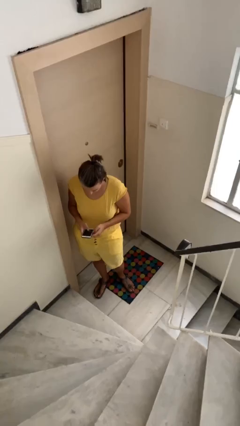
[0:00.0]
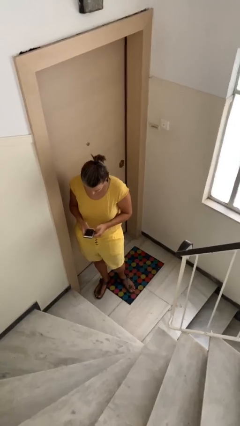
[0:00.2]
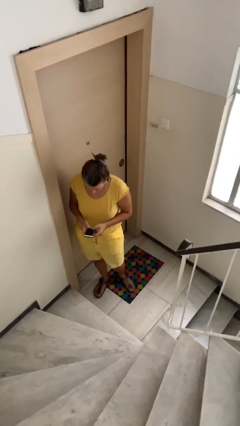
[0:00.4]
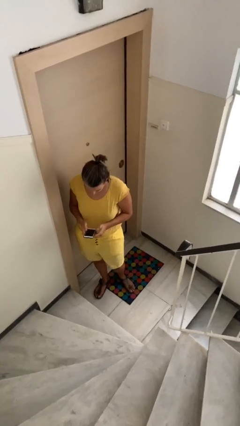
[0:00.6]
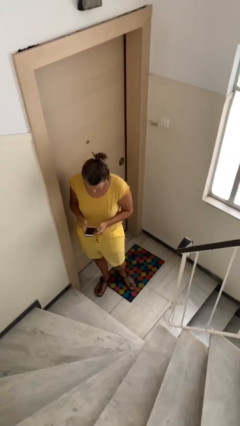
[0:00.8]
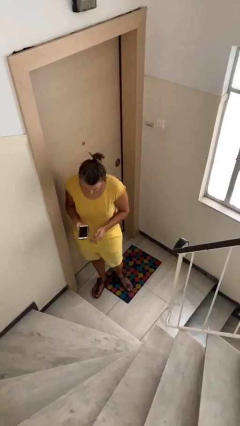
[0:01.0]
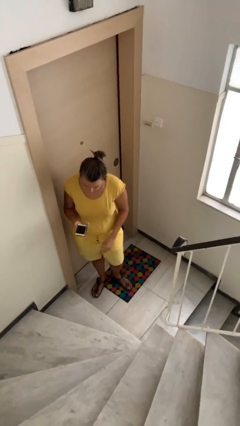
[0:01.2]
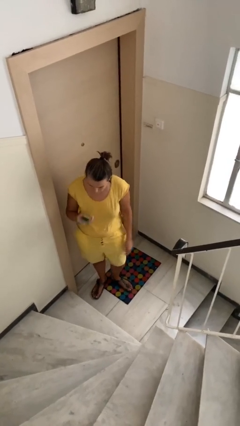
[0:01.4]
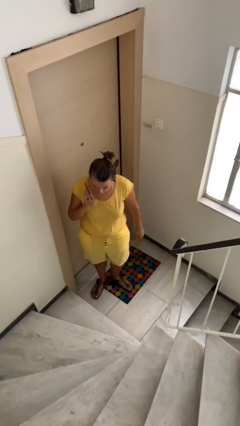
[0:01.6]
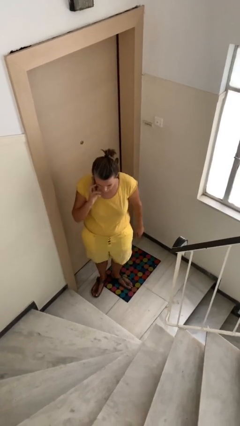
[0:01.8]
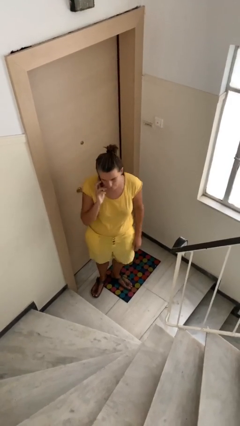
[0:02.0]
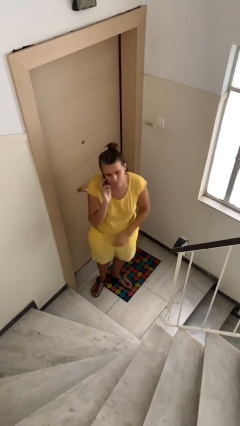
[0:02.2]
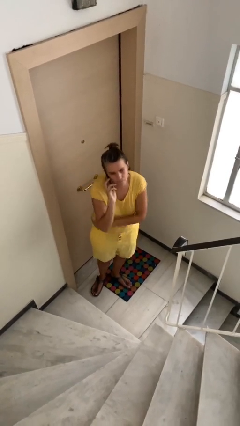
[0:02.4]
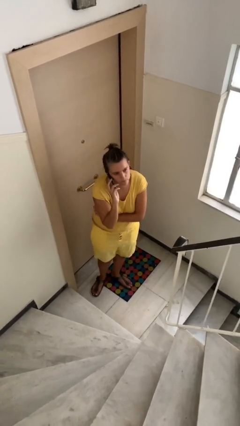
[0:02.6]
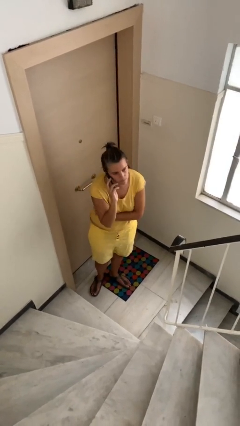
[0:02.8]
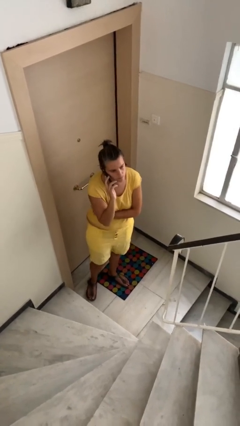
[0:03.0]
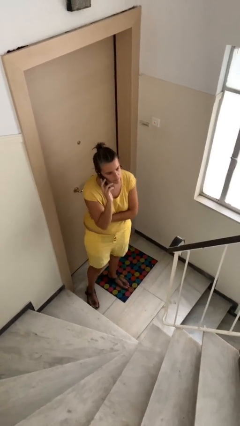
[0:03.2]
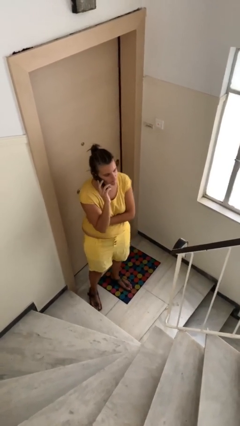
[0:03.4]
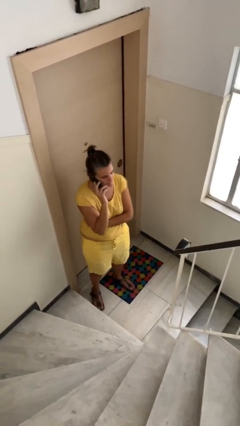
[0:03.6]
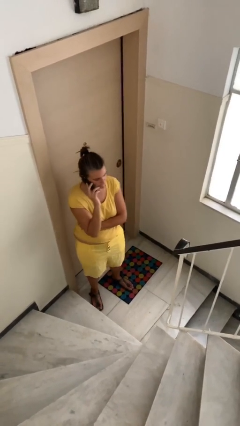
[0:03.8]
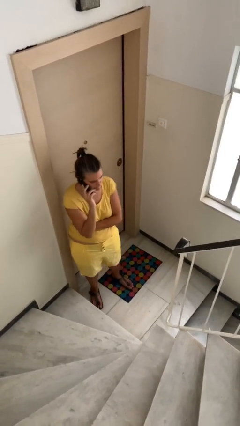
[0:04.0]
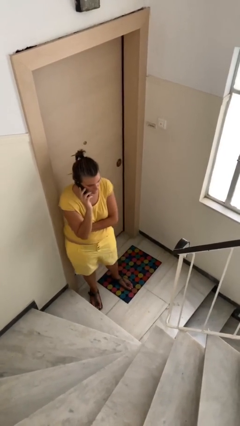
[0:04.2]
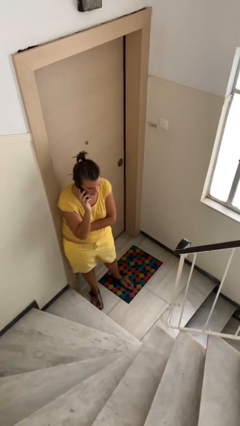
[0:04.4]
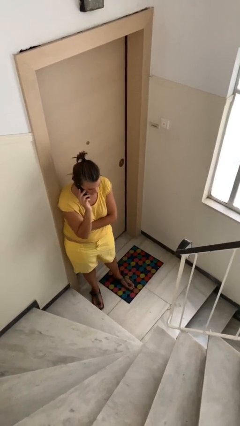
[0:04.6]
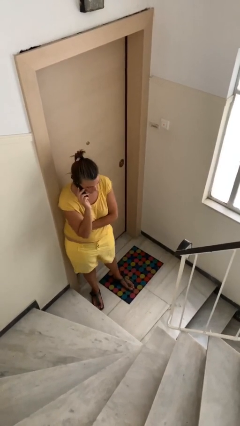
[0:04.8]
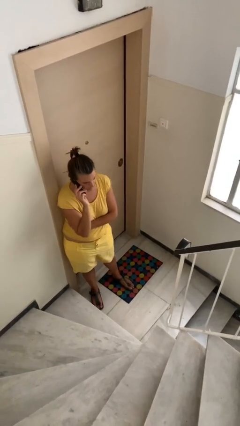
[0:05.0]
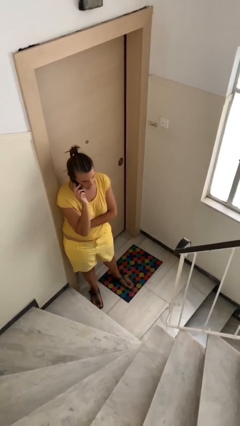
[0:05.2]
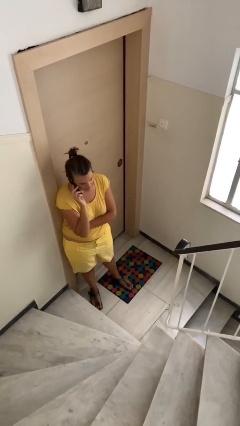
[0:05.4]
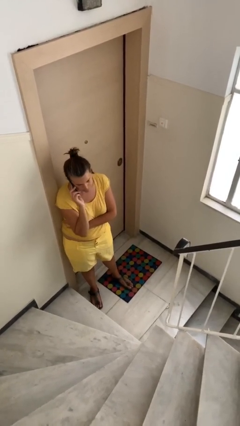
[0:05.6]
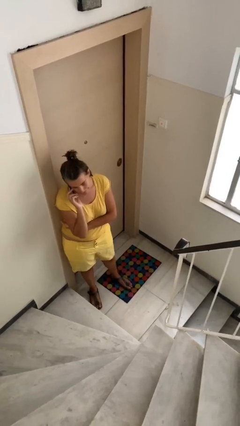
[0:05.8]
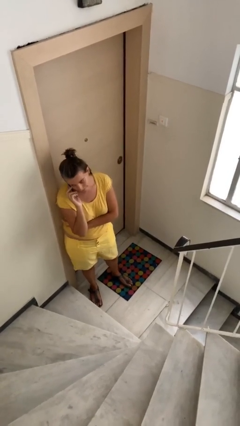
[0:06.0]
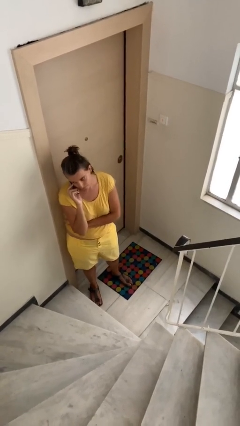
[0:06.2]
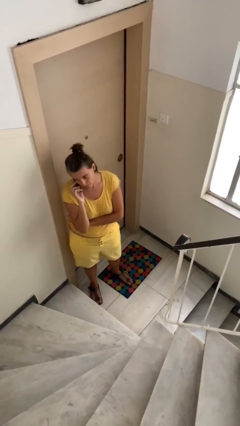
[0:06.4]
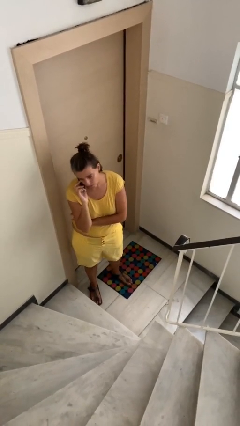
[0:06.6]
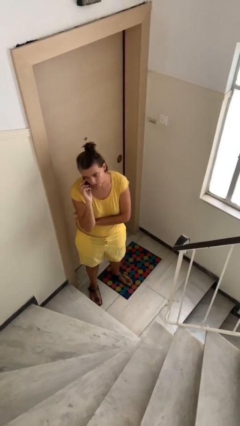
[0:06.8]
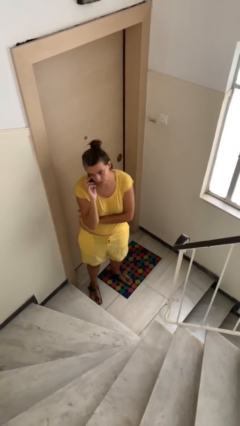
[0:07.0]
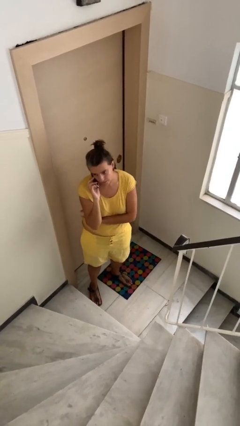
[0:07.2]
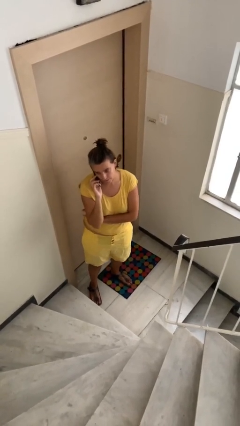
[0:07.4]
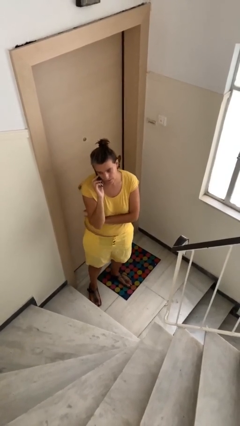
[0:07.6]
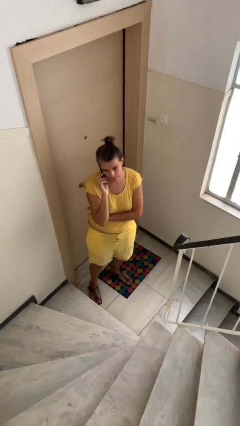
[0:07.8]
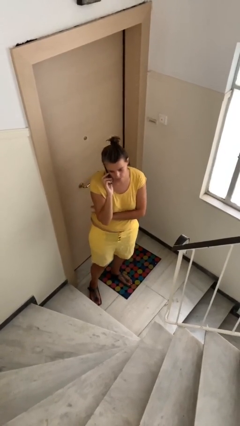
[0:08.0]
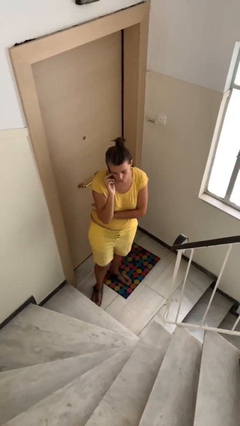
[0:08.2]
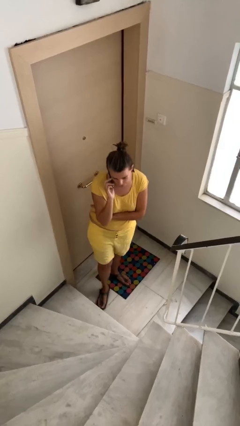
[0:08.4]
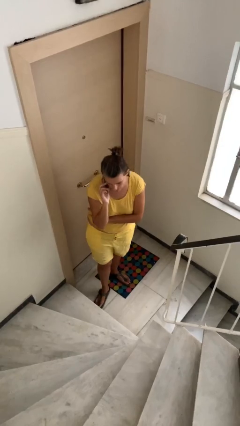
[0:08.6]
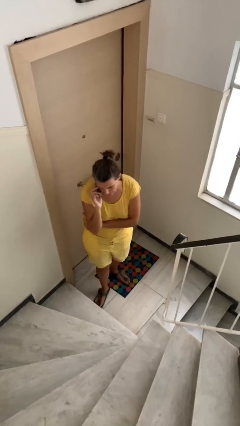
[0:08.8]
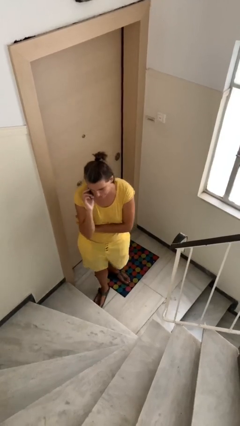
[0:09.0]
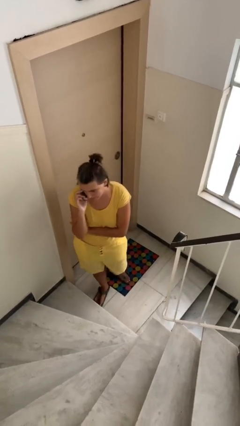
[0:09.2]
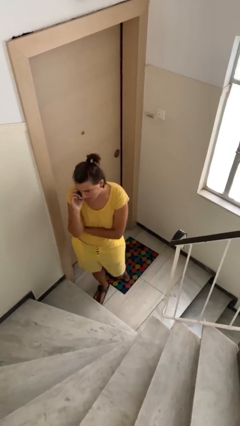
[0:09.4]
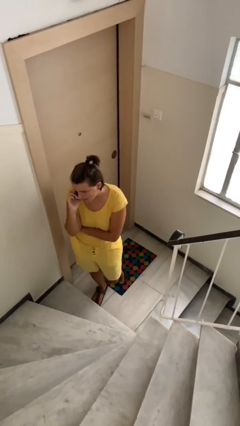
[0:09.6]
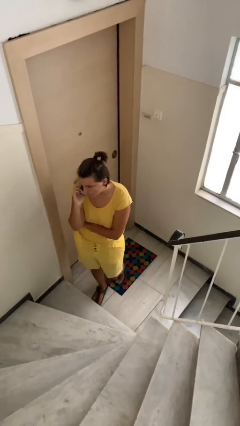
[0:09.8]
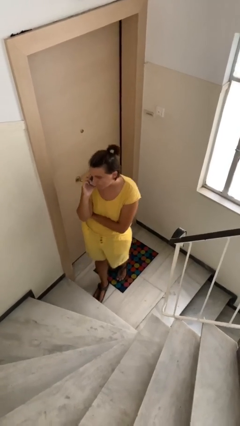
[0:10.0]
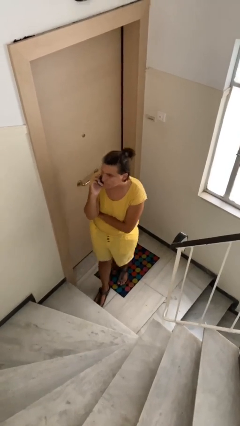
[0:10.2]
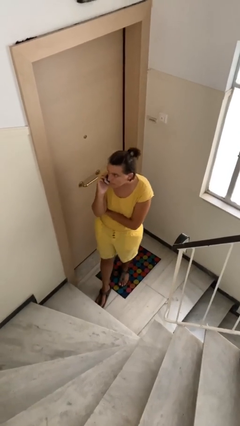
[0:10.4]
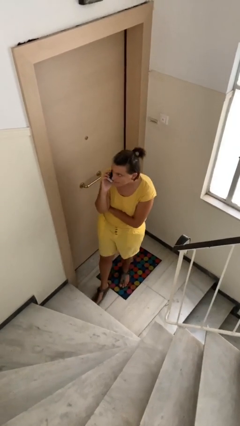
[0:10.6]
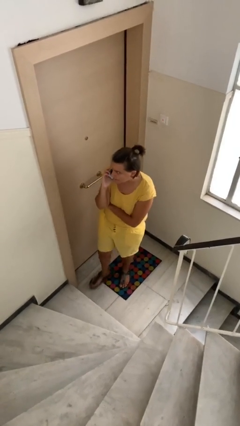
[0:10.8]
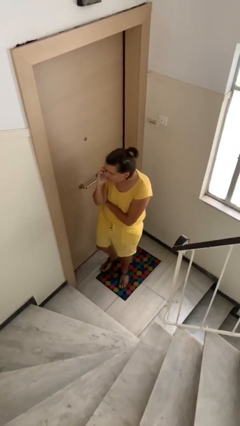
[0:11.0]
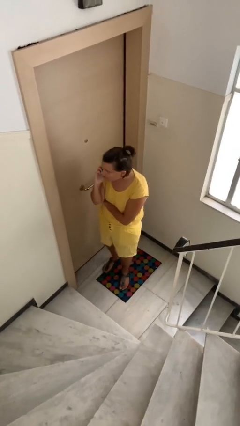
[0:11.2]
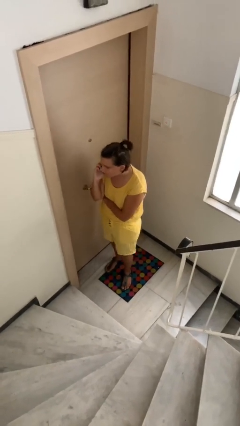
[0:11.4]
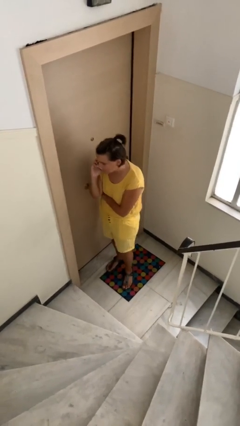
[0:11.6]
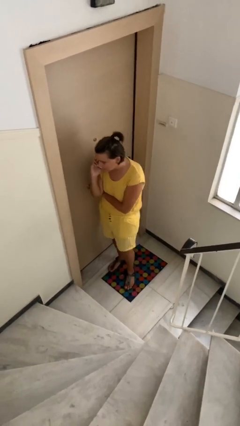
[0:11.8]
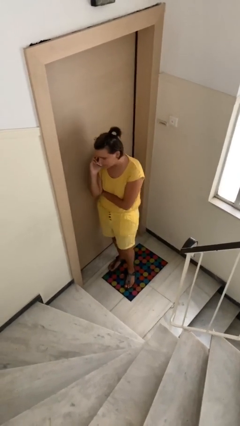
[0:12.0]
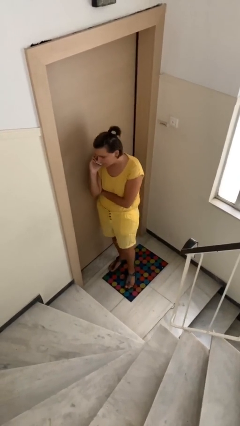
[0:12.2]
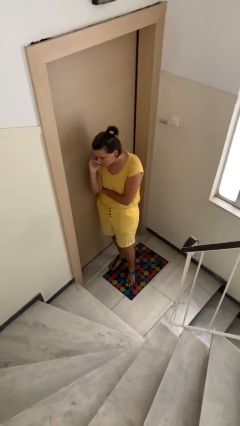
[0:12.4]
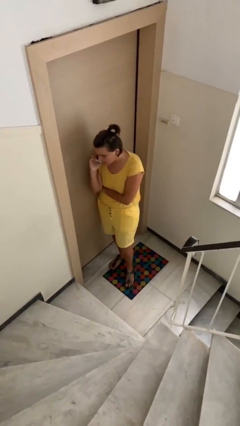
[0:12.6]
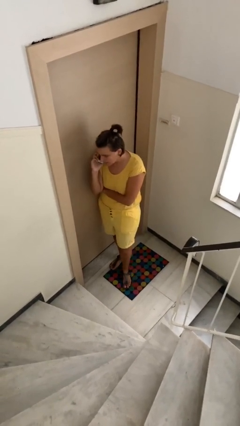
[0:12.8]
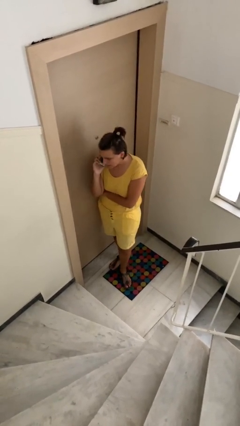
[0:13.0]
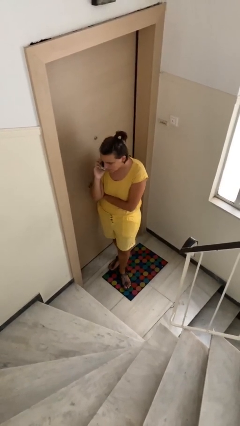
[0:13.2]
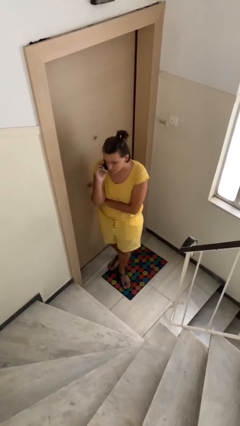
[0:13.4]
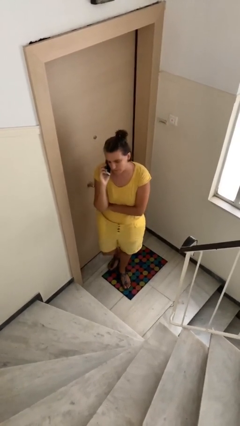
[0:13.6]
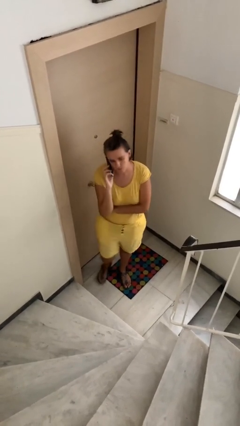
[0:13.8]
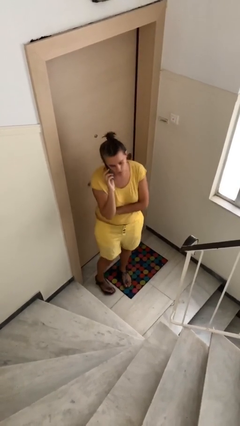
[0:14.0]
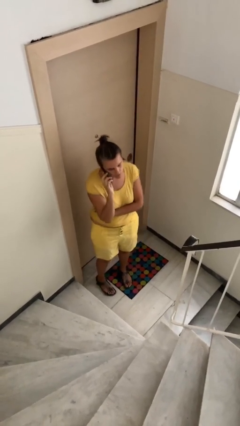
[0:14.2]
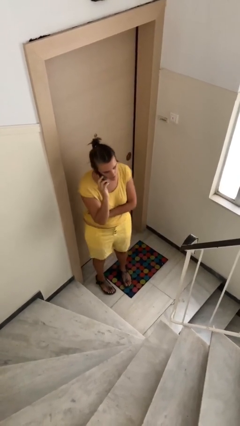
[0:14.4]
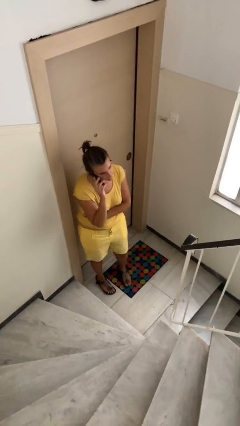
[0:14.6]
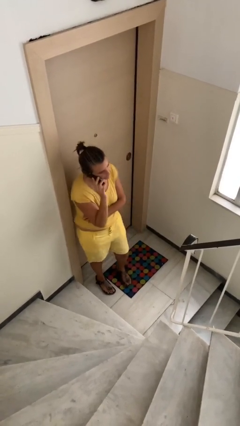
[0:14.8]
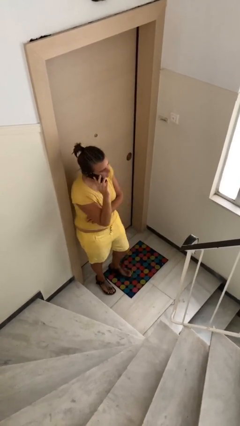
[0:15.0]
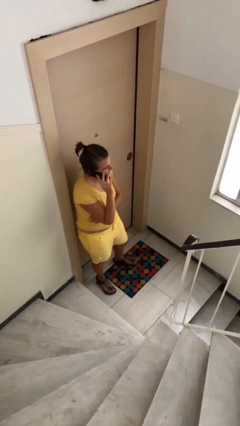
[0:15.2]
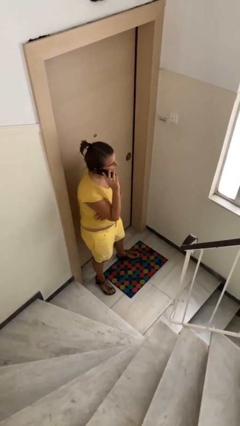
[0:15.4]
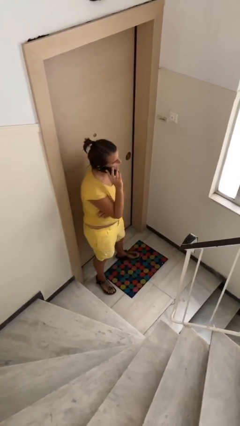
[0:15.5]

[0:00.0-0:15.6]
person talks on phone

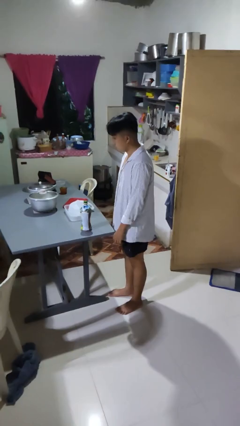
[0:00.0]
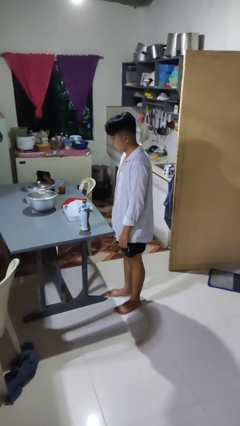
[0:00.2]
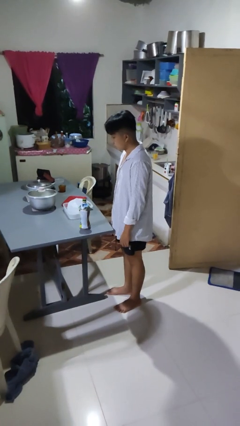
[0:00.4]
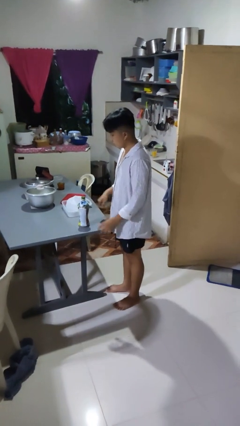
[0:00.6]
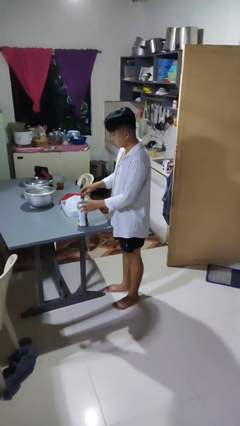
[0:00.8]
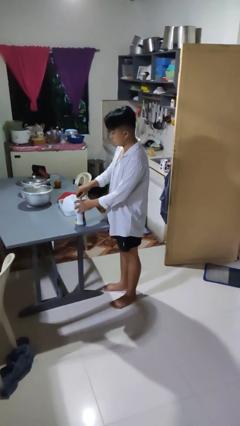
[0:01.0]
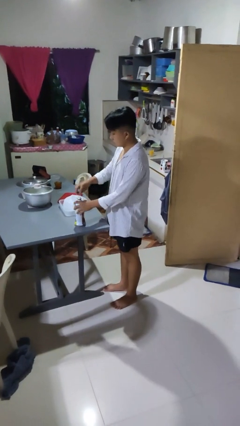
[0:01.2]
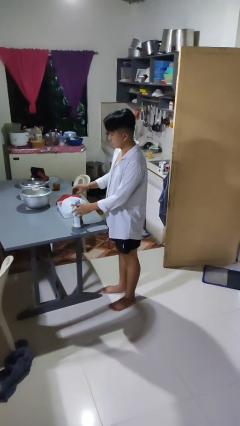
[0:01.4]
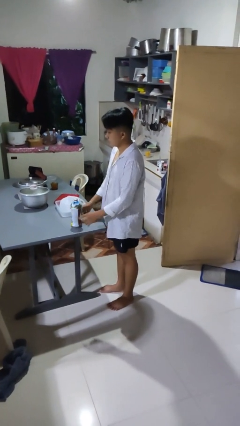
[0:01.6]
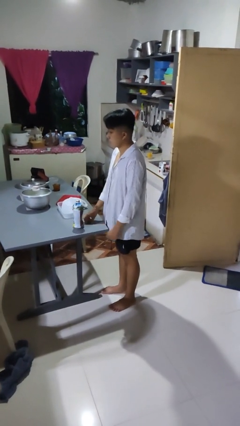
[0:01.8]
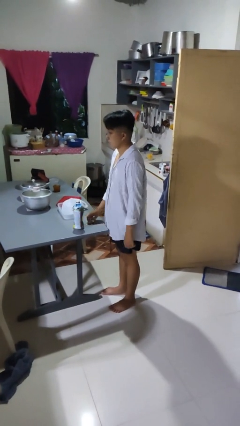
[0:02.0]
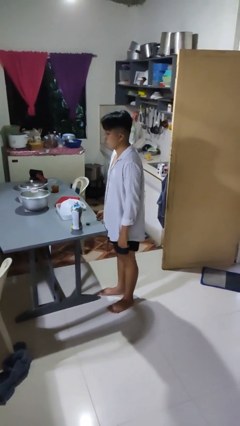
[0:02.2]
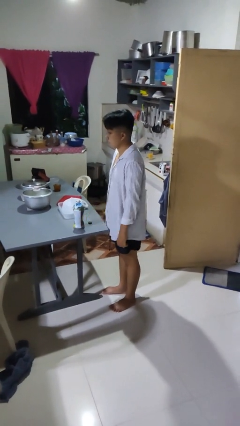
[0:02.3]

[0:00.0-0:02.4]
person unscrews lid from bottle

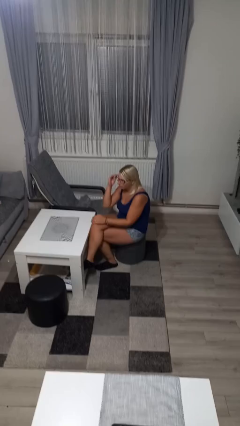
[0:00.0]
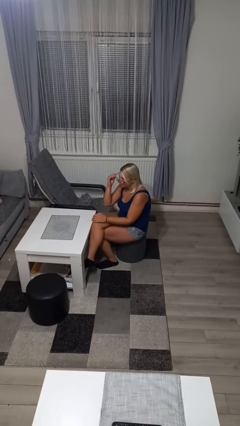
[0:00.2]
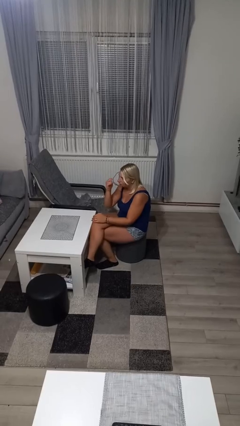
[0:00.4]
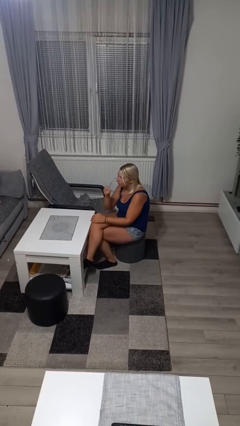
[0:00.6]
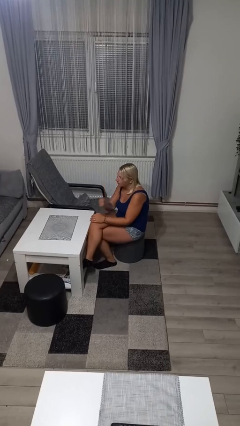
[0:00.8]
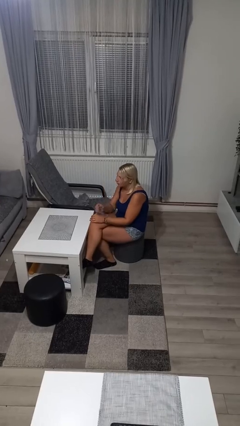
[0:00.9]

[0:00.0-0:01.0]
person takes off glasses
